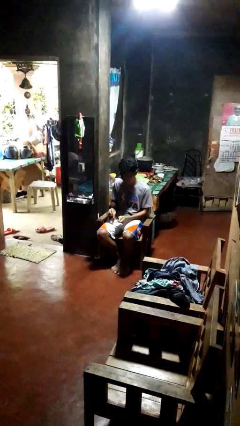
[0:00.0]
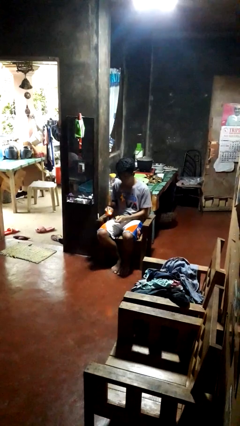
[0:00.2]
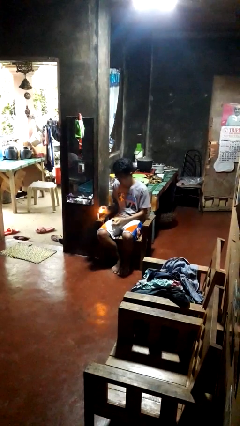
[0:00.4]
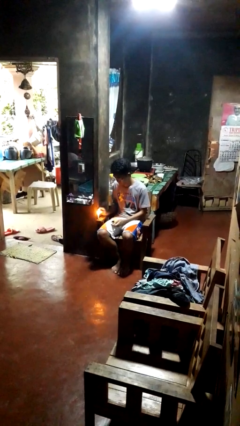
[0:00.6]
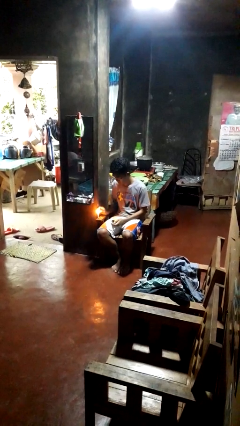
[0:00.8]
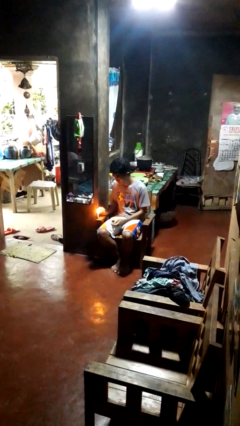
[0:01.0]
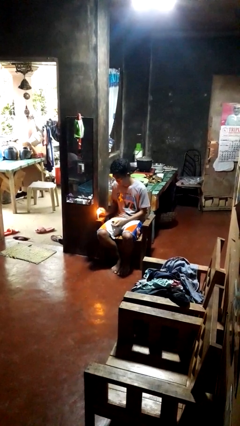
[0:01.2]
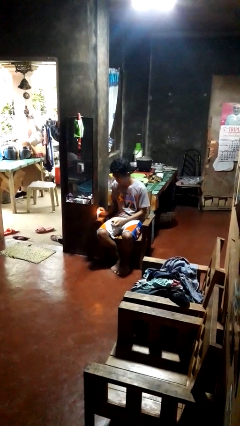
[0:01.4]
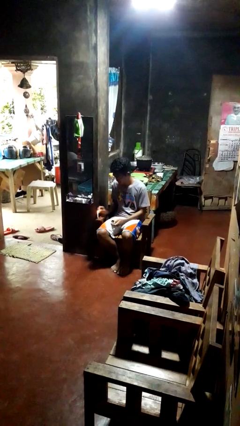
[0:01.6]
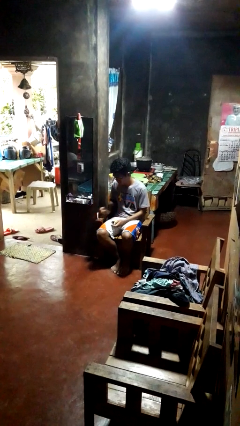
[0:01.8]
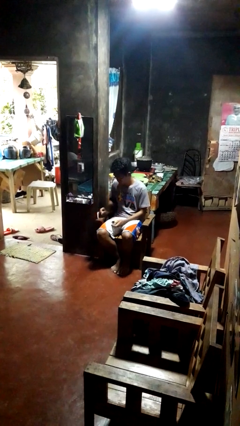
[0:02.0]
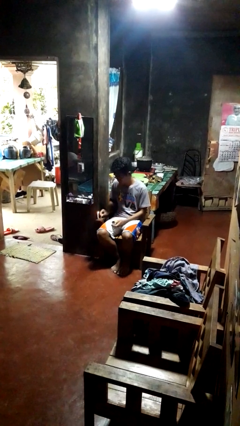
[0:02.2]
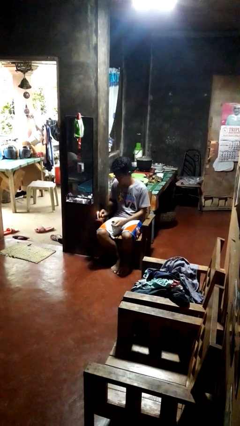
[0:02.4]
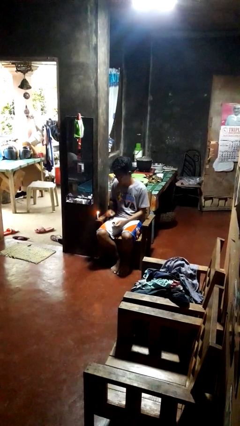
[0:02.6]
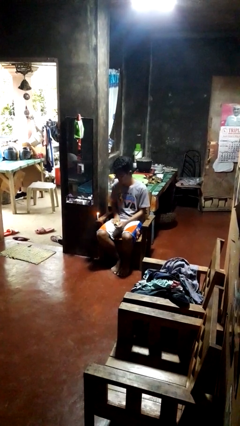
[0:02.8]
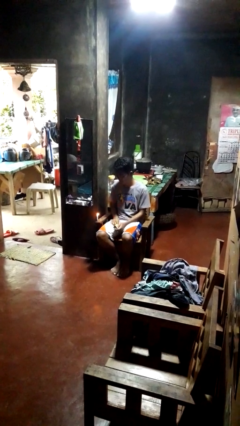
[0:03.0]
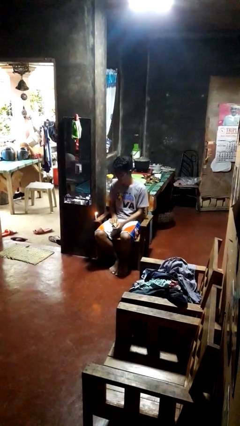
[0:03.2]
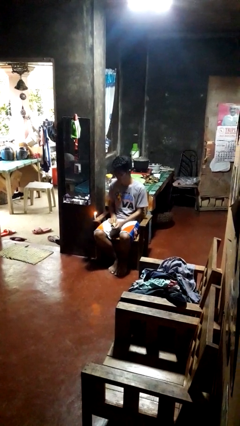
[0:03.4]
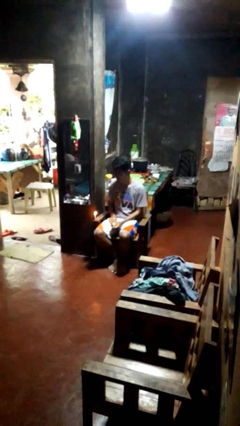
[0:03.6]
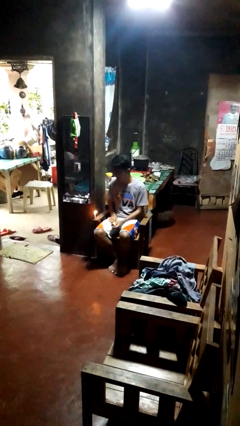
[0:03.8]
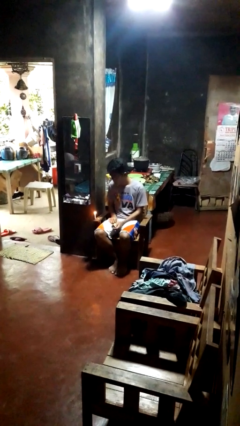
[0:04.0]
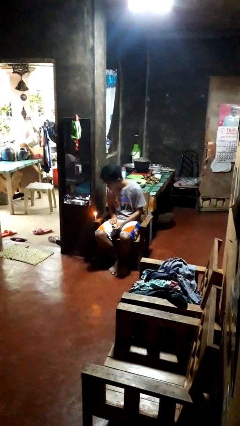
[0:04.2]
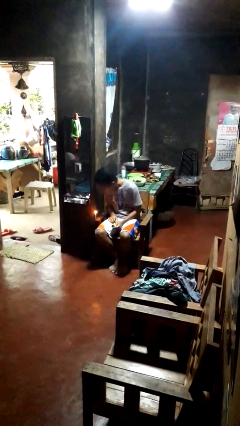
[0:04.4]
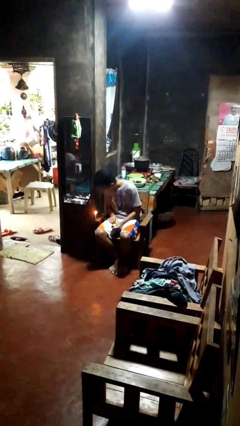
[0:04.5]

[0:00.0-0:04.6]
person lights candle

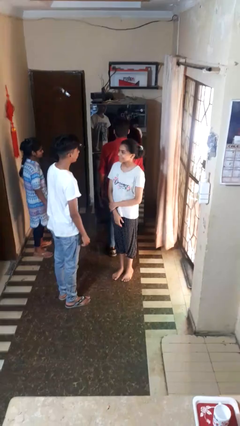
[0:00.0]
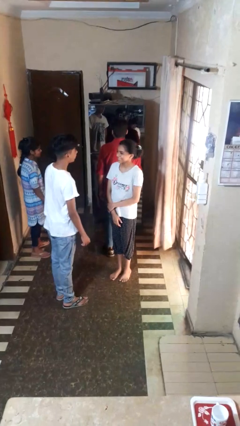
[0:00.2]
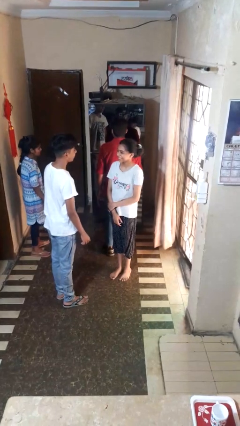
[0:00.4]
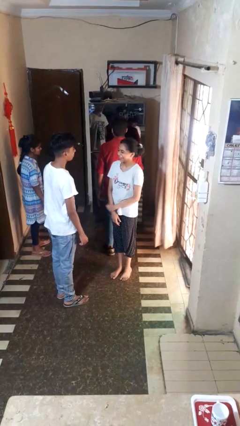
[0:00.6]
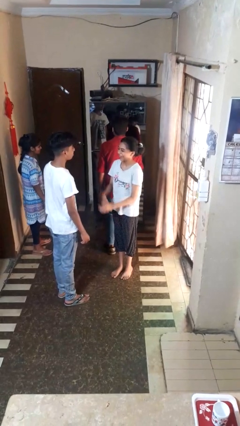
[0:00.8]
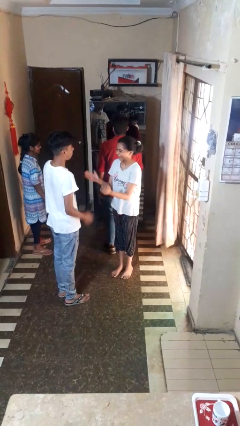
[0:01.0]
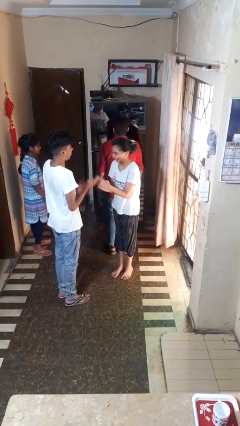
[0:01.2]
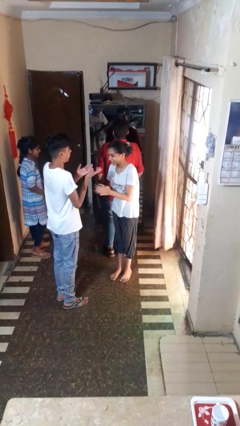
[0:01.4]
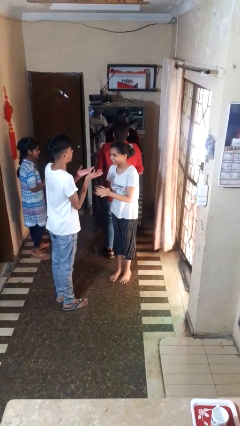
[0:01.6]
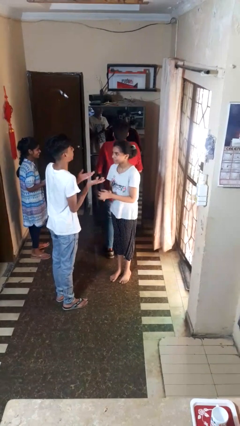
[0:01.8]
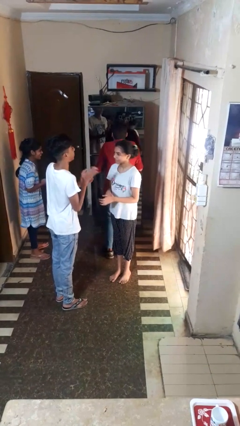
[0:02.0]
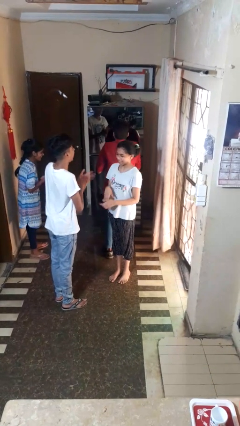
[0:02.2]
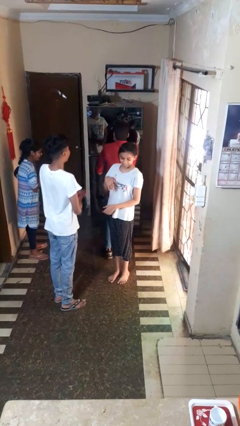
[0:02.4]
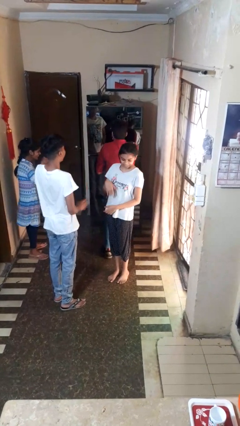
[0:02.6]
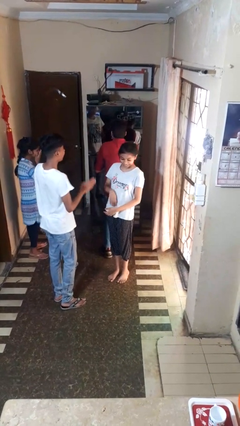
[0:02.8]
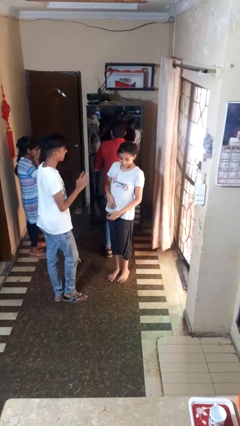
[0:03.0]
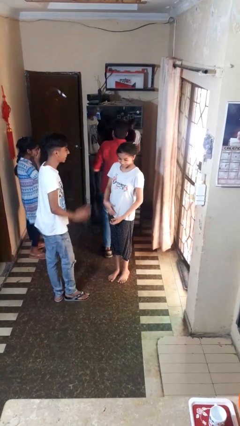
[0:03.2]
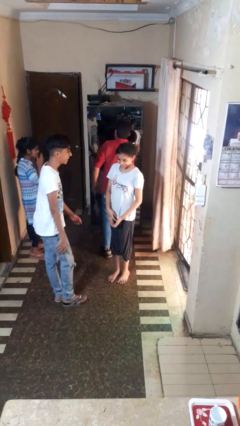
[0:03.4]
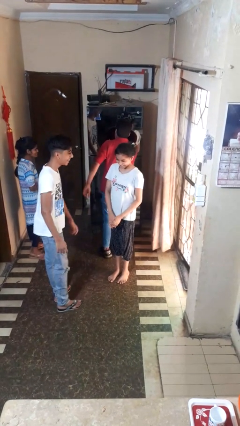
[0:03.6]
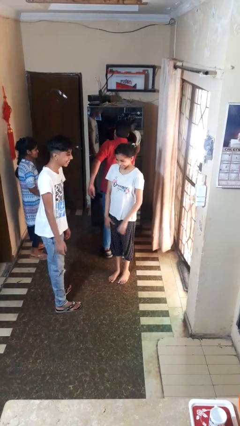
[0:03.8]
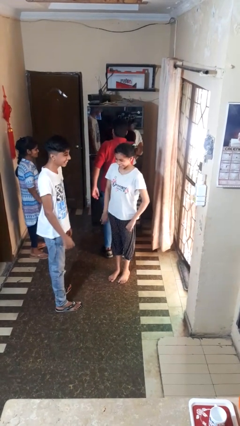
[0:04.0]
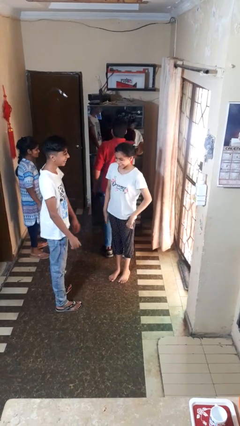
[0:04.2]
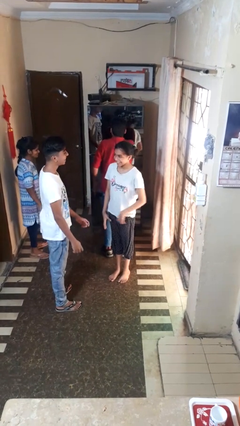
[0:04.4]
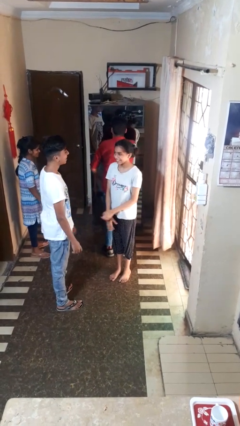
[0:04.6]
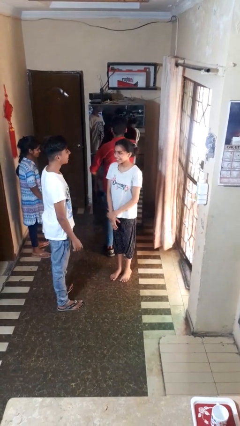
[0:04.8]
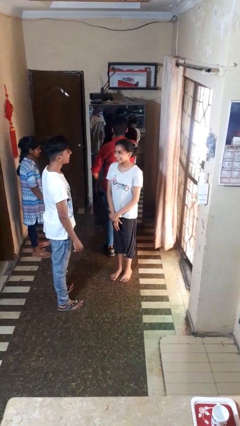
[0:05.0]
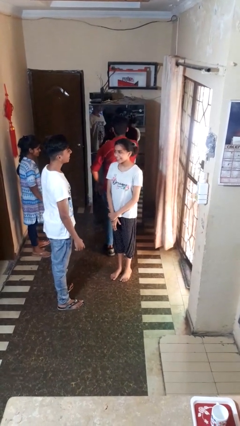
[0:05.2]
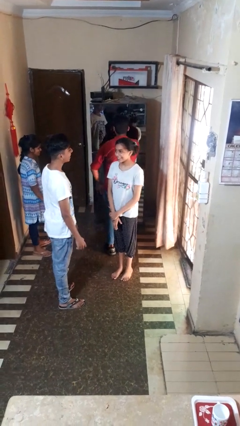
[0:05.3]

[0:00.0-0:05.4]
person laughs with person

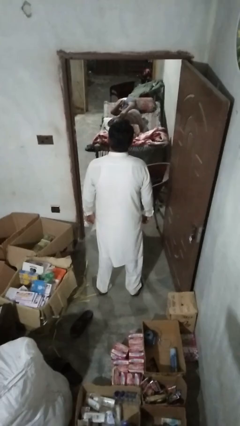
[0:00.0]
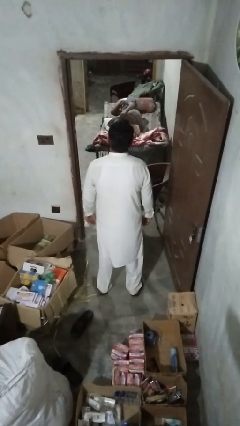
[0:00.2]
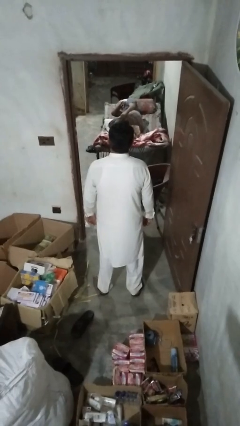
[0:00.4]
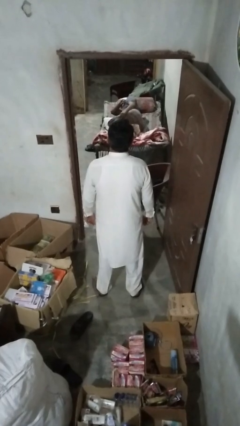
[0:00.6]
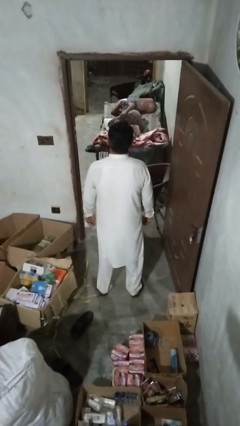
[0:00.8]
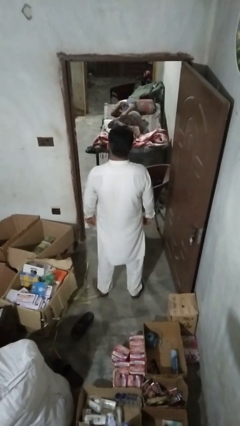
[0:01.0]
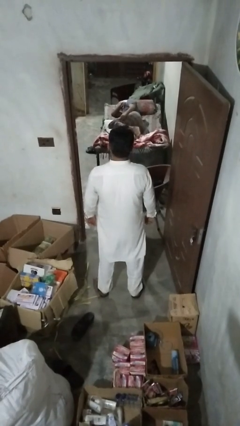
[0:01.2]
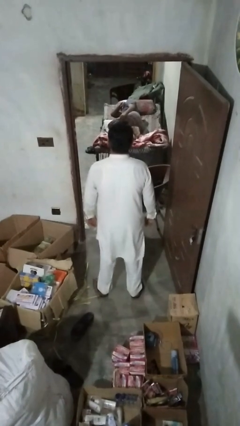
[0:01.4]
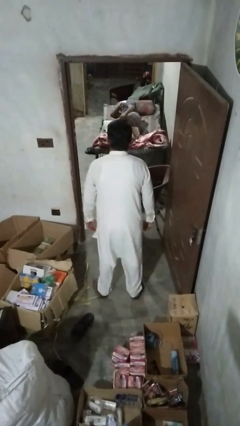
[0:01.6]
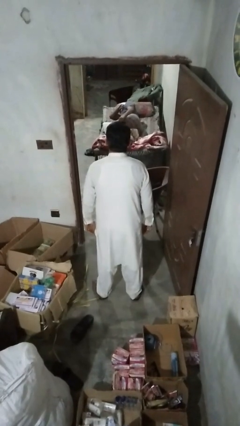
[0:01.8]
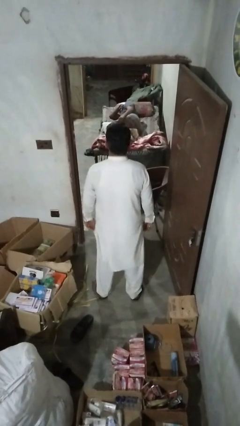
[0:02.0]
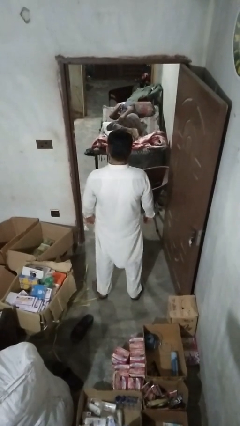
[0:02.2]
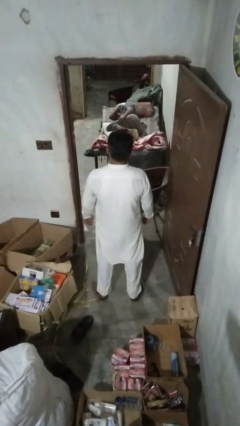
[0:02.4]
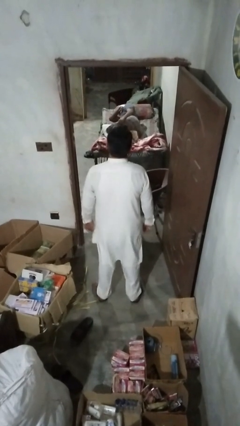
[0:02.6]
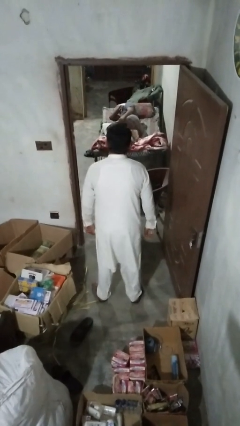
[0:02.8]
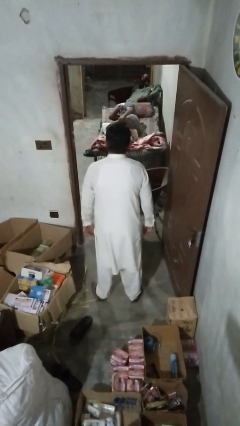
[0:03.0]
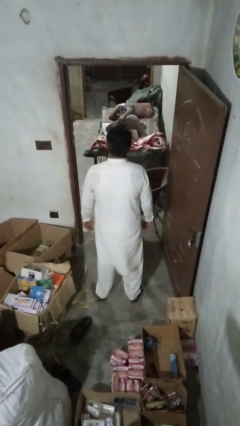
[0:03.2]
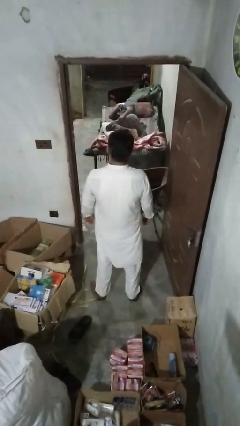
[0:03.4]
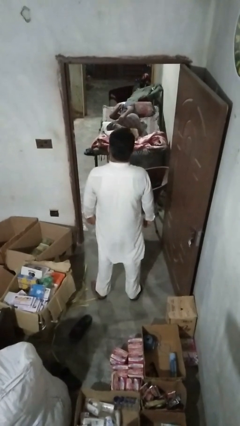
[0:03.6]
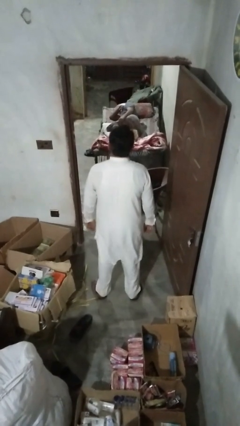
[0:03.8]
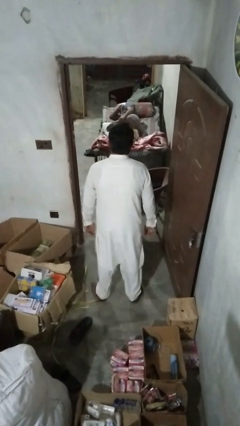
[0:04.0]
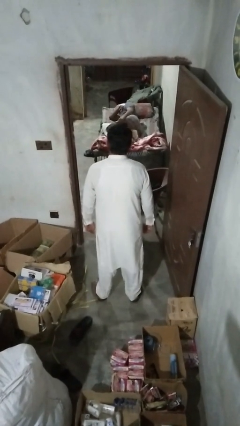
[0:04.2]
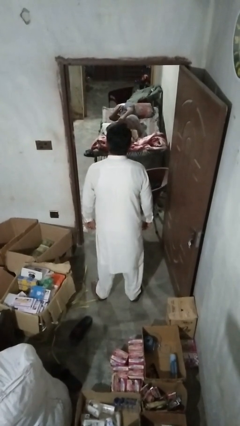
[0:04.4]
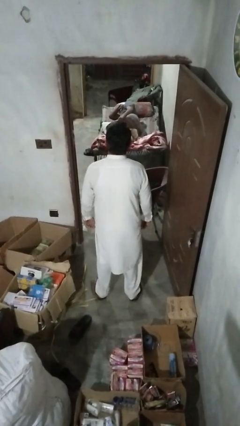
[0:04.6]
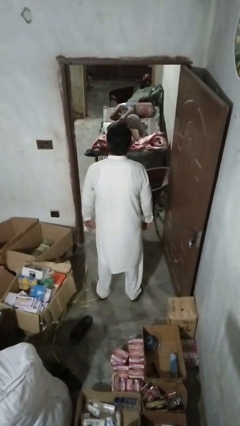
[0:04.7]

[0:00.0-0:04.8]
person wiggles hips

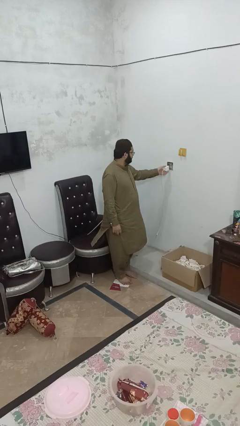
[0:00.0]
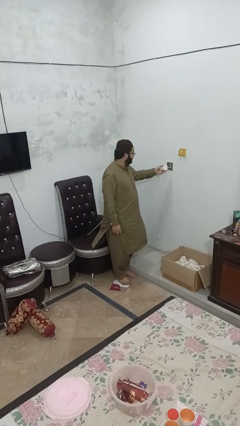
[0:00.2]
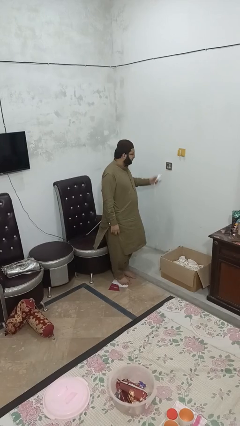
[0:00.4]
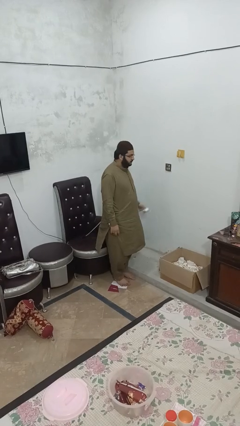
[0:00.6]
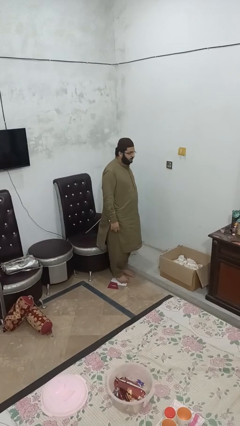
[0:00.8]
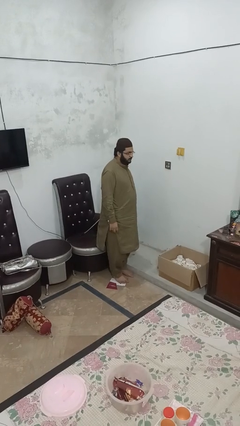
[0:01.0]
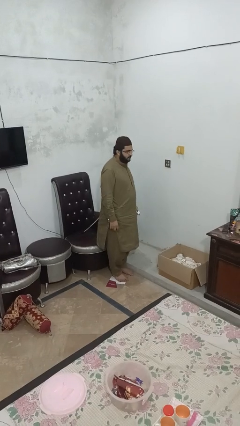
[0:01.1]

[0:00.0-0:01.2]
person unplugs from electrical socket

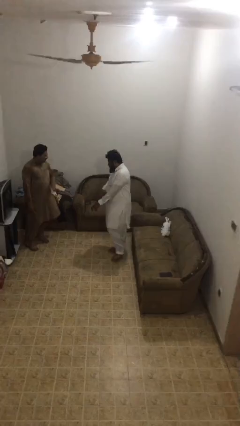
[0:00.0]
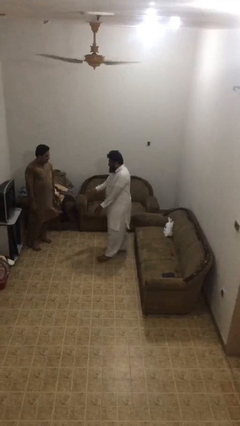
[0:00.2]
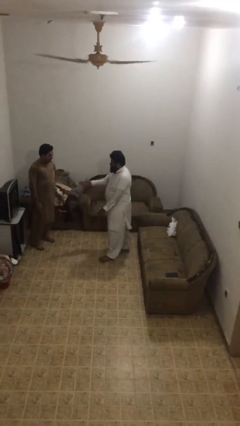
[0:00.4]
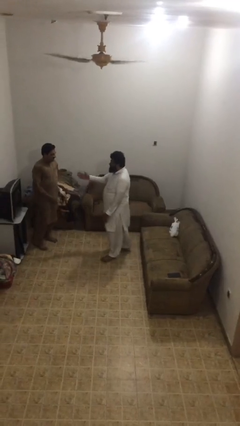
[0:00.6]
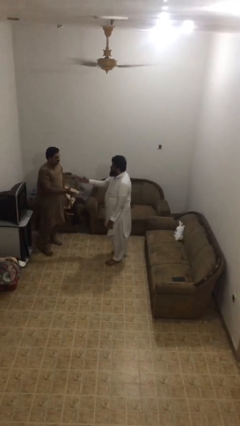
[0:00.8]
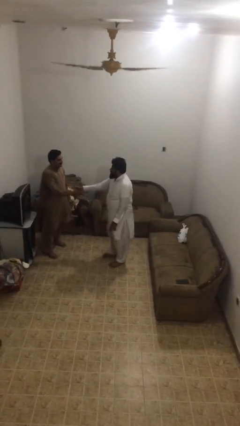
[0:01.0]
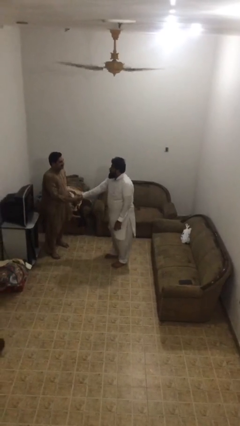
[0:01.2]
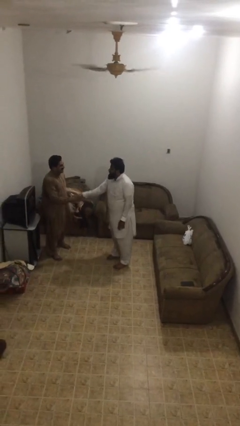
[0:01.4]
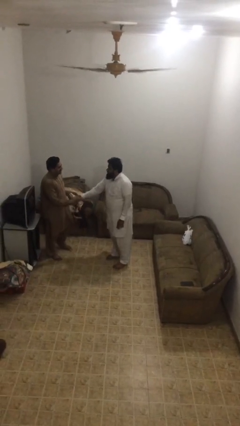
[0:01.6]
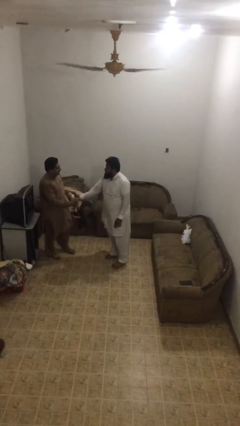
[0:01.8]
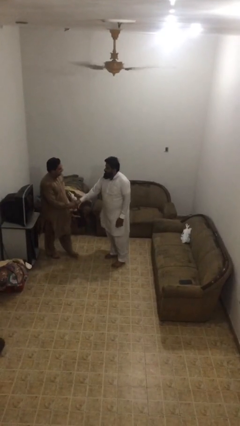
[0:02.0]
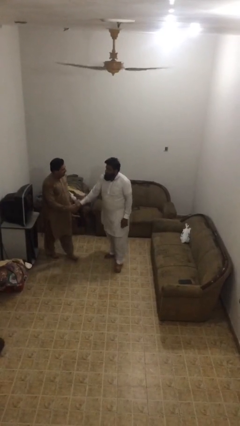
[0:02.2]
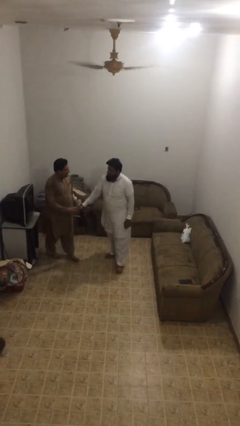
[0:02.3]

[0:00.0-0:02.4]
person shakes hand
